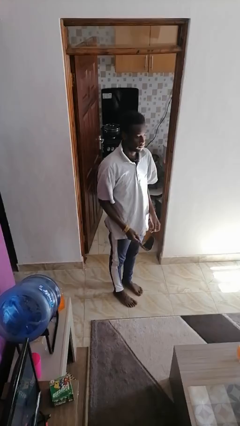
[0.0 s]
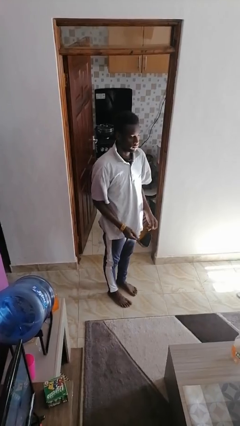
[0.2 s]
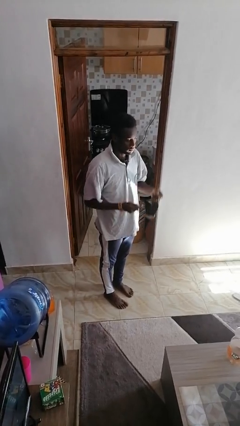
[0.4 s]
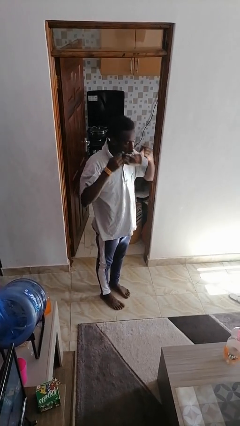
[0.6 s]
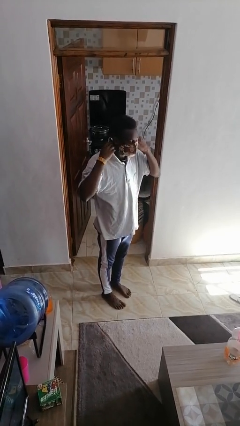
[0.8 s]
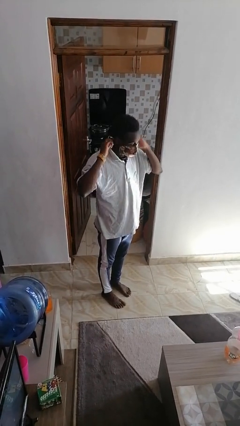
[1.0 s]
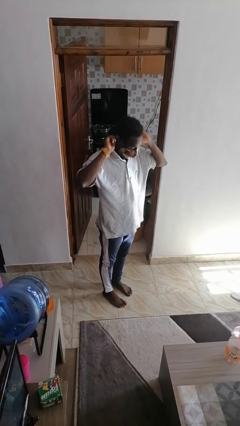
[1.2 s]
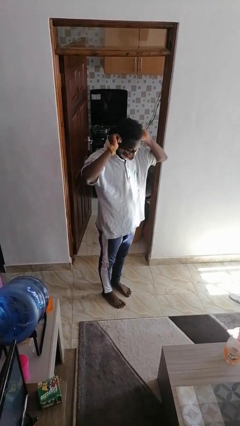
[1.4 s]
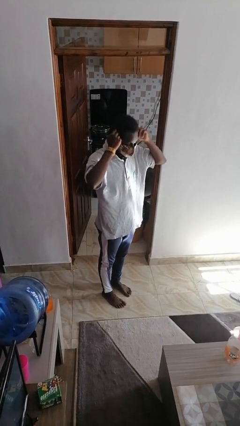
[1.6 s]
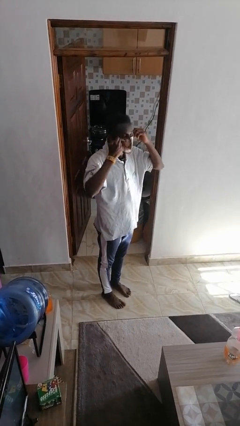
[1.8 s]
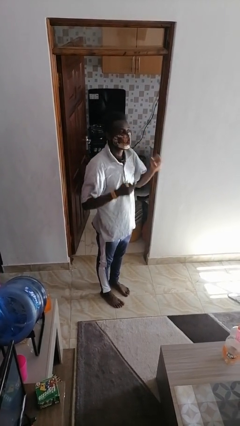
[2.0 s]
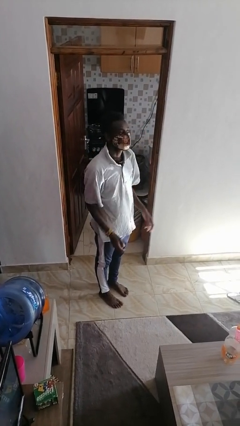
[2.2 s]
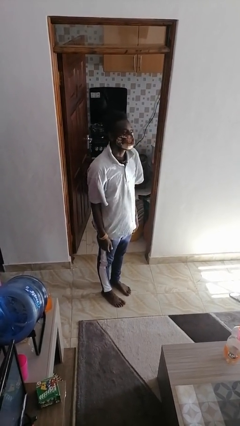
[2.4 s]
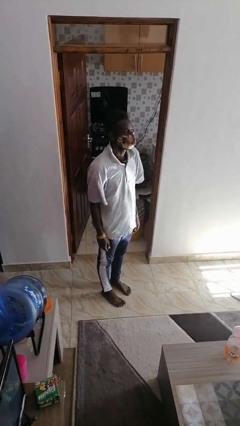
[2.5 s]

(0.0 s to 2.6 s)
person puts on facemask

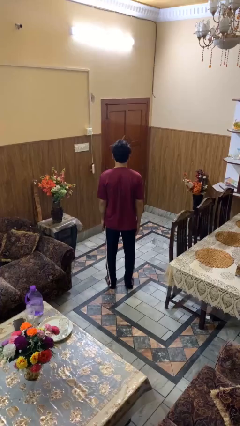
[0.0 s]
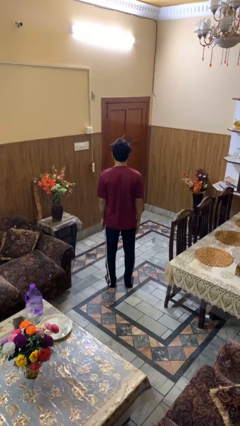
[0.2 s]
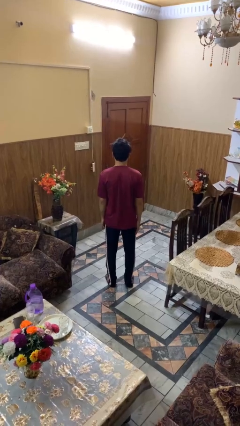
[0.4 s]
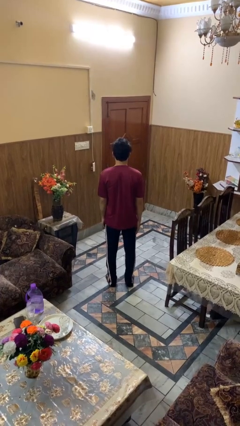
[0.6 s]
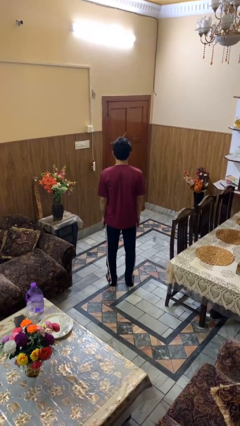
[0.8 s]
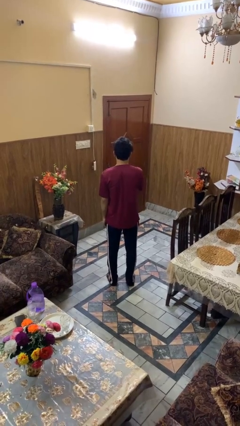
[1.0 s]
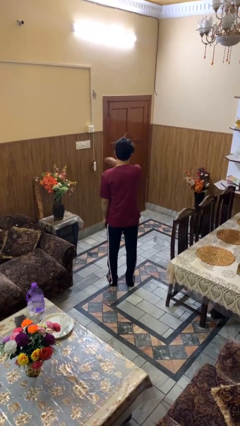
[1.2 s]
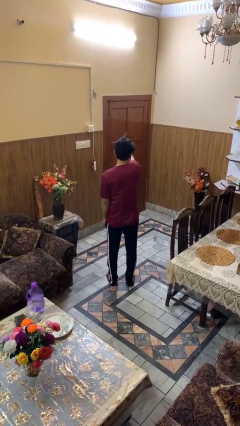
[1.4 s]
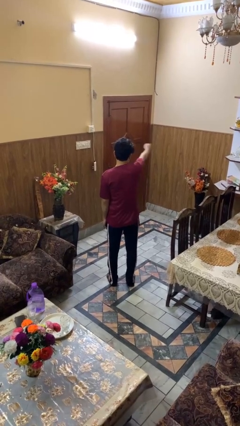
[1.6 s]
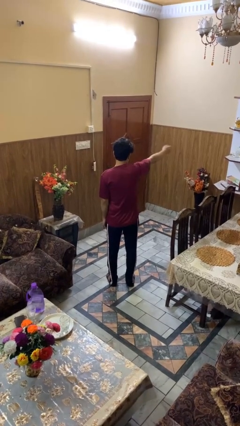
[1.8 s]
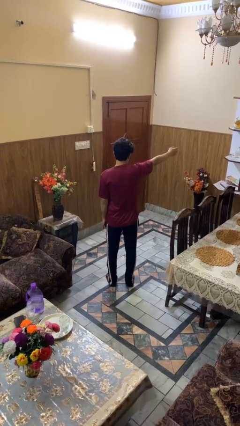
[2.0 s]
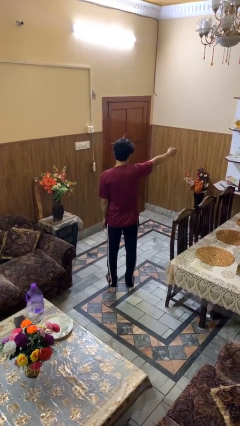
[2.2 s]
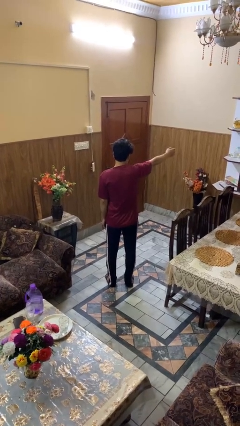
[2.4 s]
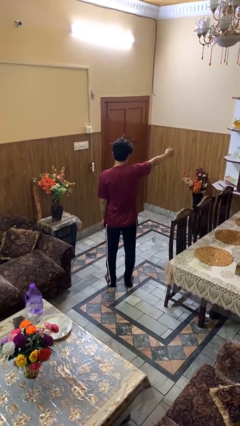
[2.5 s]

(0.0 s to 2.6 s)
person gestures swipe right

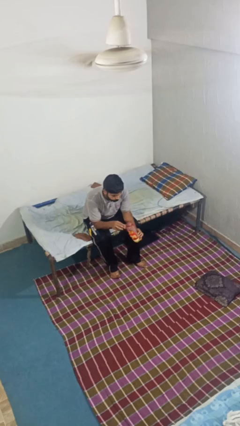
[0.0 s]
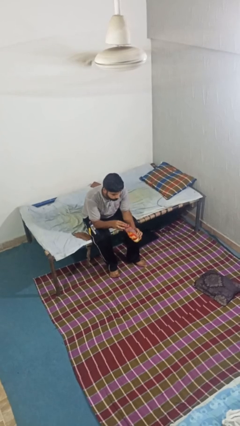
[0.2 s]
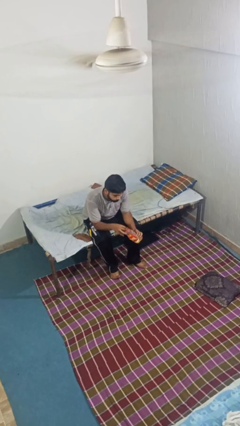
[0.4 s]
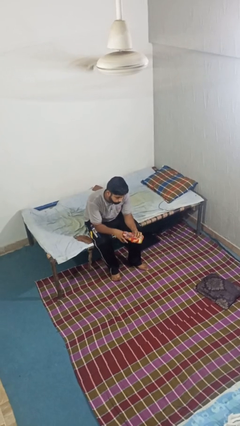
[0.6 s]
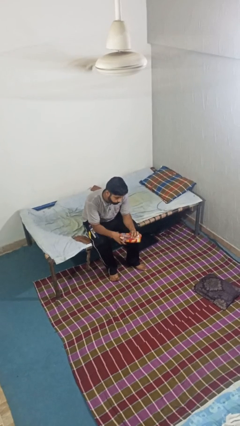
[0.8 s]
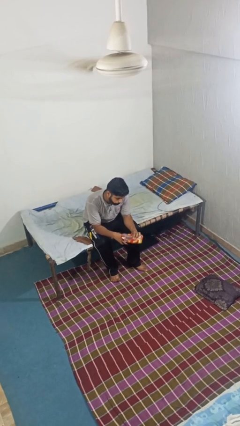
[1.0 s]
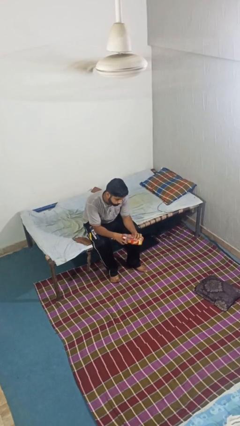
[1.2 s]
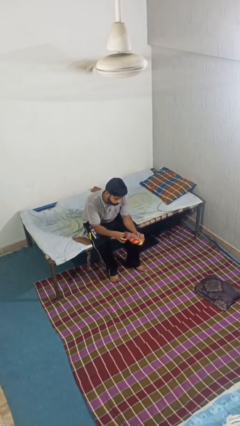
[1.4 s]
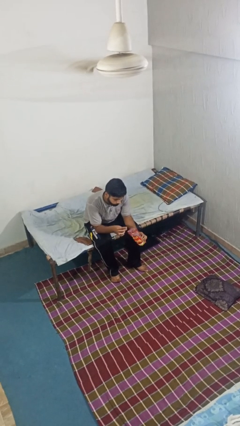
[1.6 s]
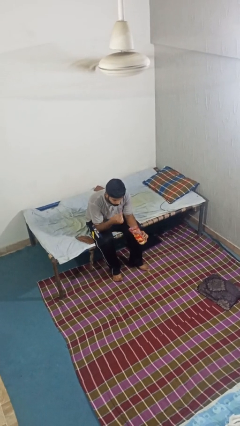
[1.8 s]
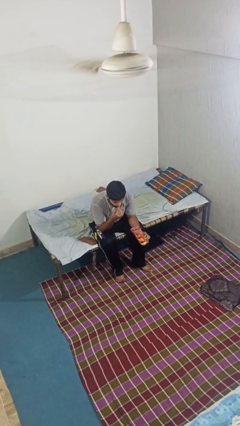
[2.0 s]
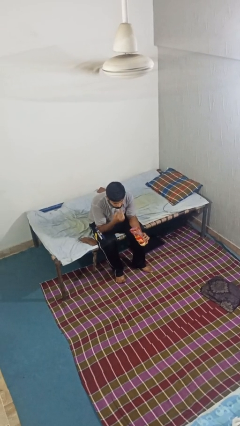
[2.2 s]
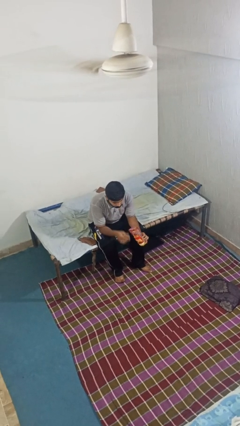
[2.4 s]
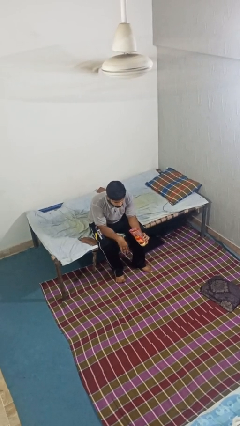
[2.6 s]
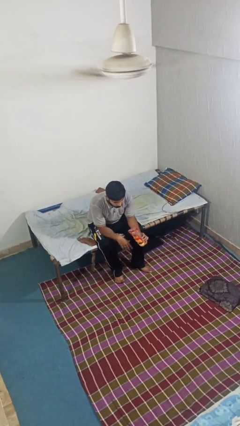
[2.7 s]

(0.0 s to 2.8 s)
person eats snack from bag

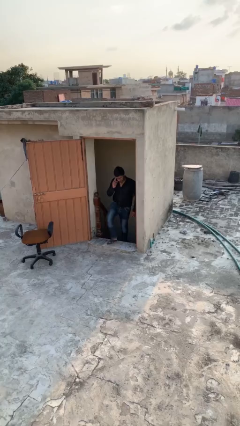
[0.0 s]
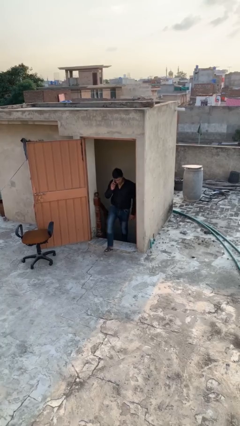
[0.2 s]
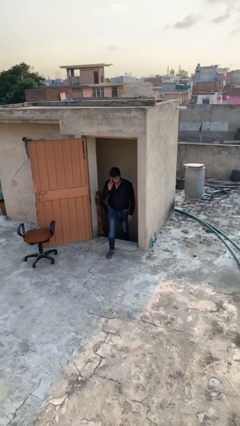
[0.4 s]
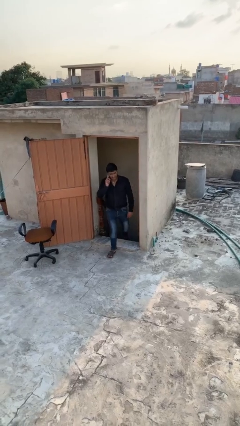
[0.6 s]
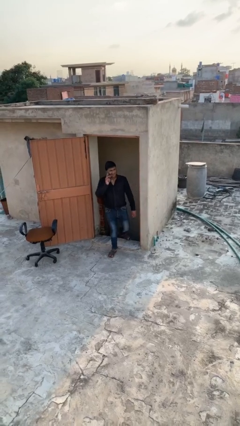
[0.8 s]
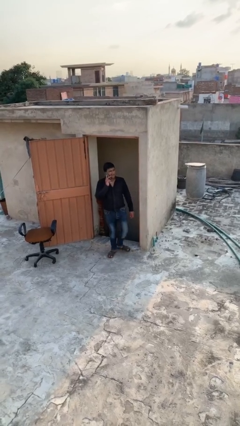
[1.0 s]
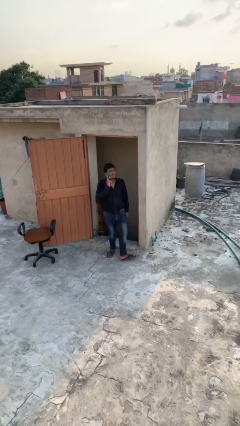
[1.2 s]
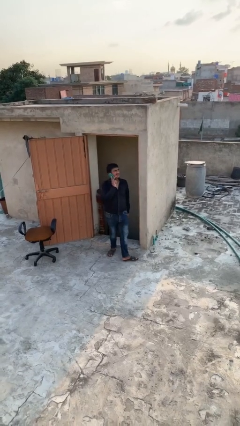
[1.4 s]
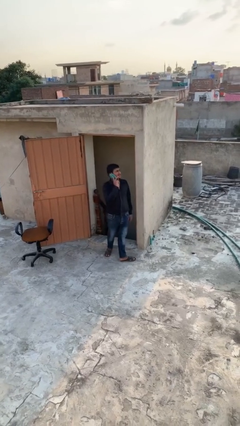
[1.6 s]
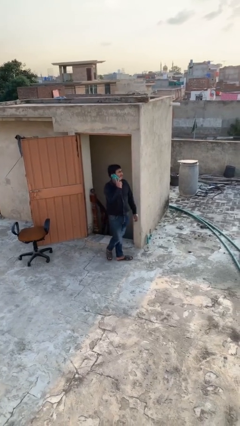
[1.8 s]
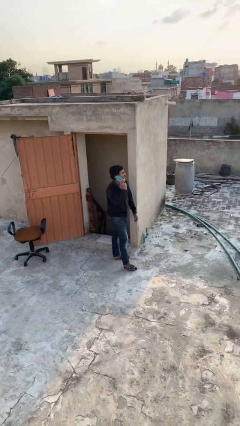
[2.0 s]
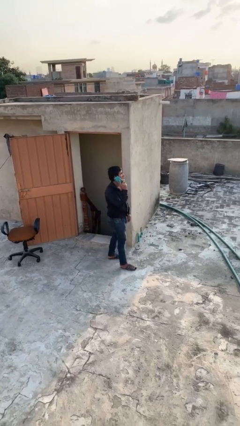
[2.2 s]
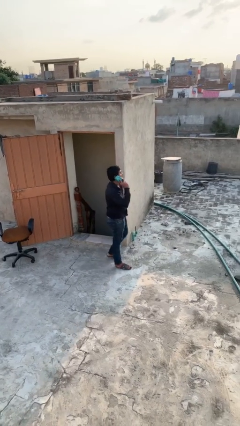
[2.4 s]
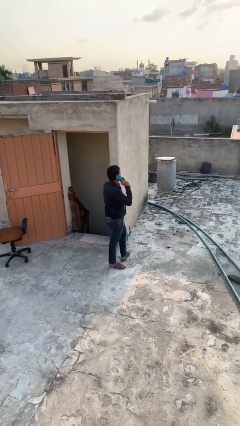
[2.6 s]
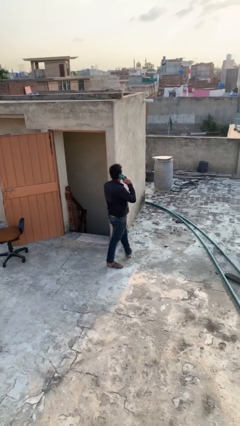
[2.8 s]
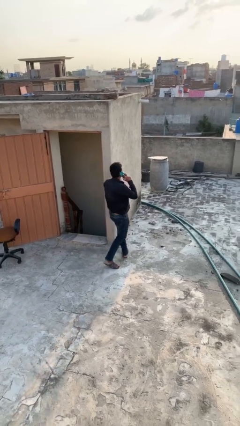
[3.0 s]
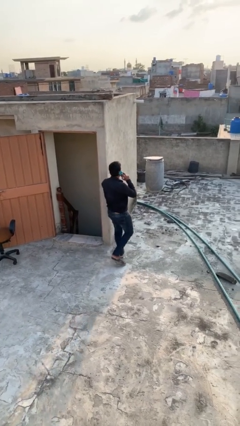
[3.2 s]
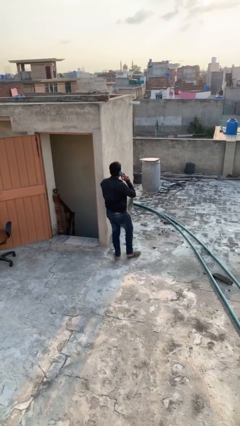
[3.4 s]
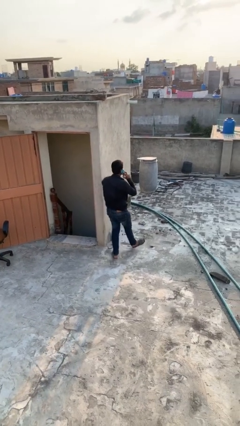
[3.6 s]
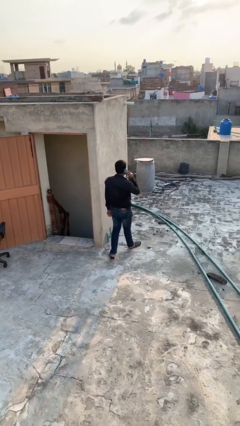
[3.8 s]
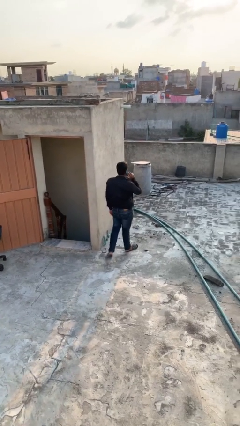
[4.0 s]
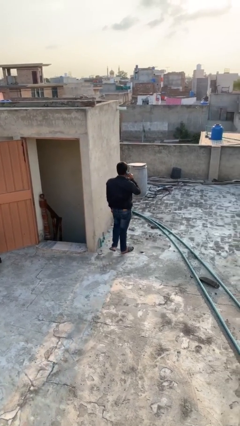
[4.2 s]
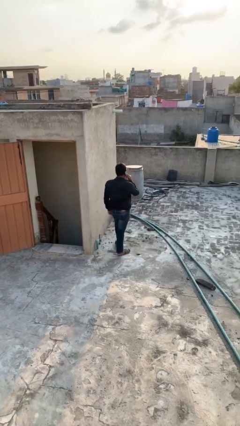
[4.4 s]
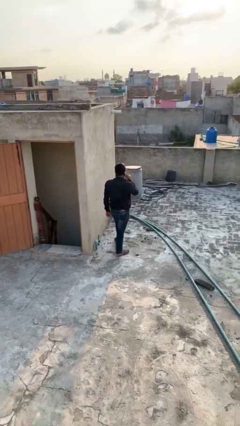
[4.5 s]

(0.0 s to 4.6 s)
person enters scene through structure

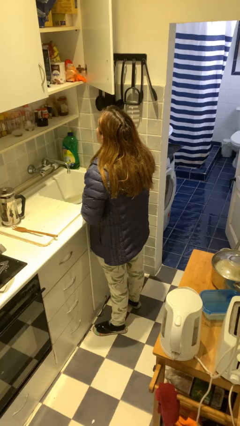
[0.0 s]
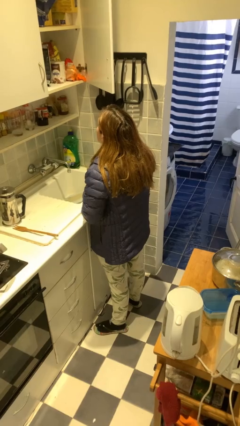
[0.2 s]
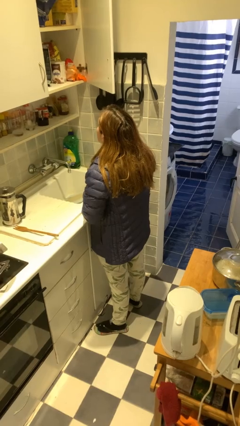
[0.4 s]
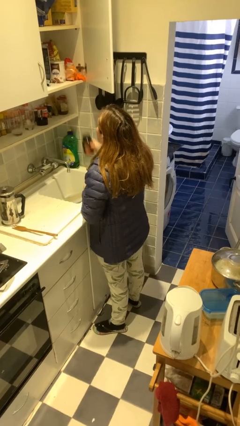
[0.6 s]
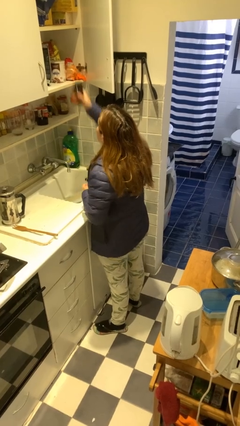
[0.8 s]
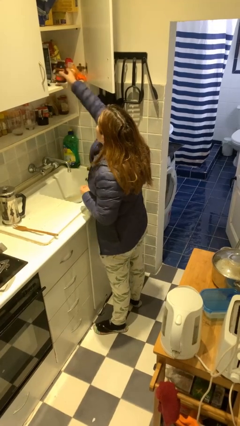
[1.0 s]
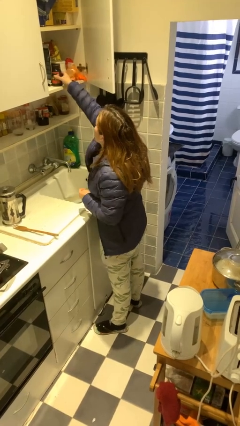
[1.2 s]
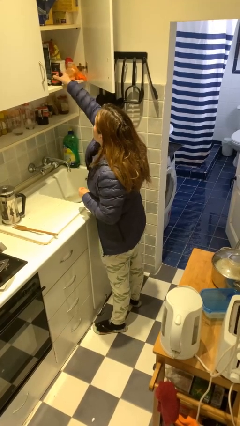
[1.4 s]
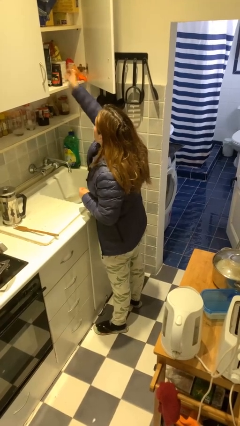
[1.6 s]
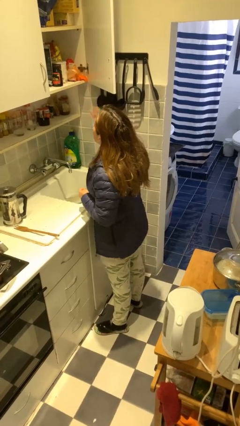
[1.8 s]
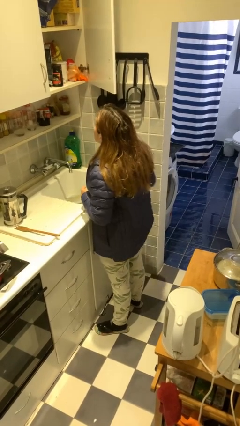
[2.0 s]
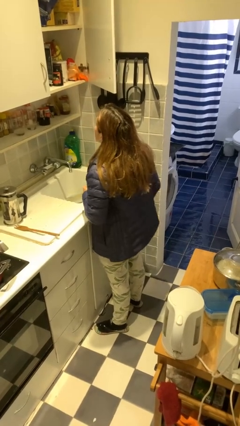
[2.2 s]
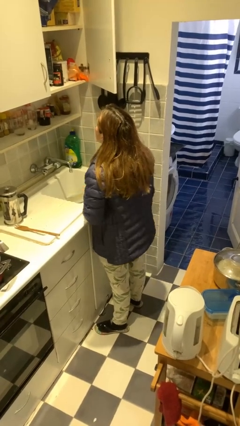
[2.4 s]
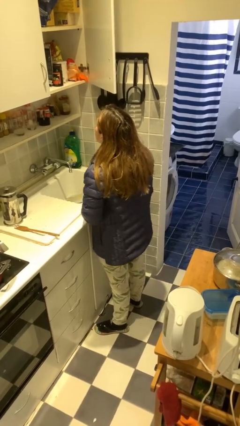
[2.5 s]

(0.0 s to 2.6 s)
person puts object in cabinet

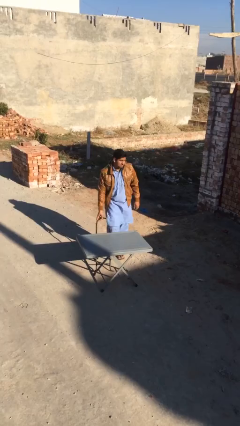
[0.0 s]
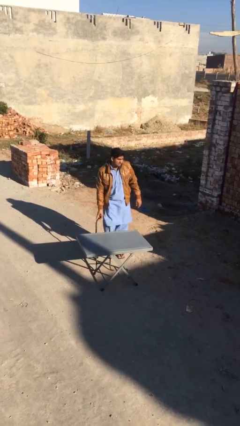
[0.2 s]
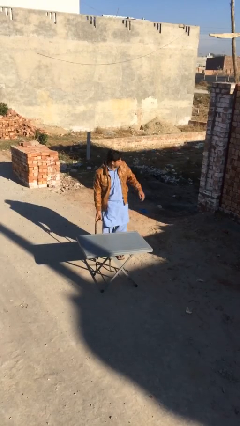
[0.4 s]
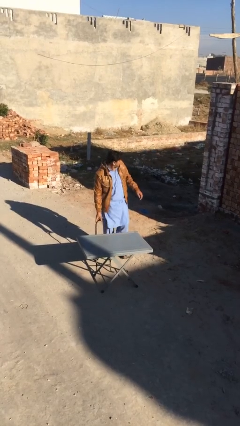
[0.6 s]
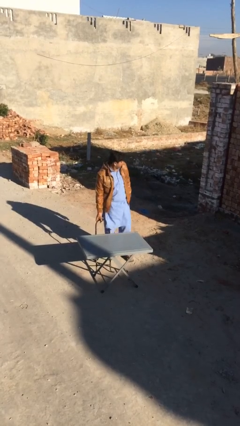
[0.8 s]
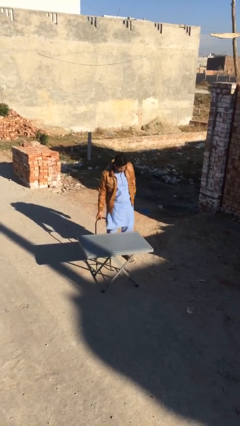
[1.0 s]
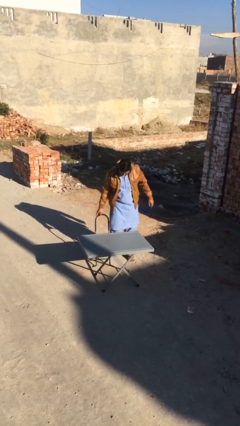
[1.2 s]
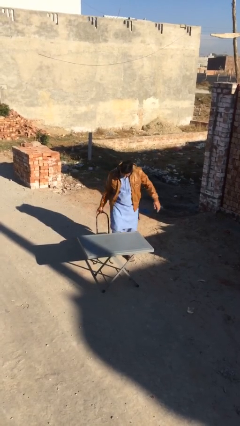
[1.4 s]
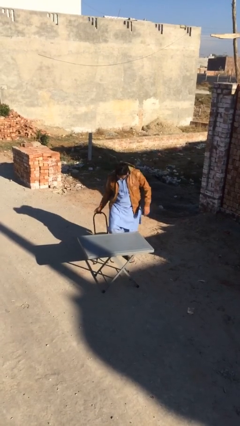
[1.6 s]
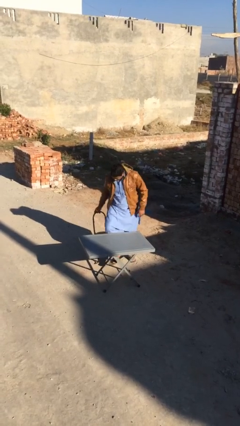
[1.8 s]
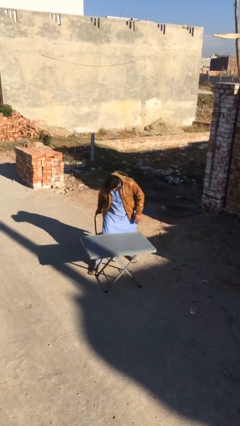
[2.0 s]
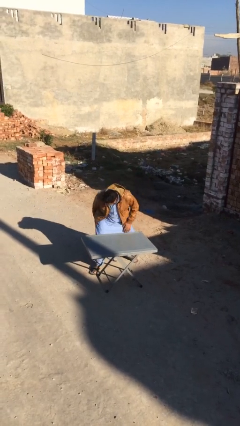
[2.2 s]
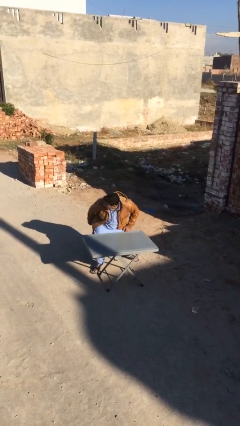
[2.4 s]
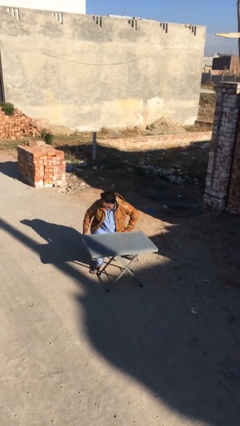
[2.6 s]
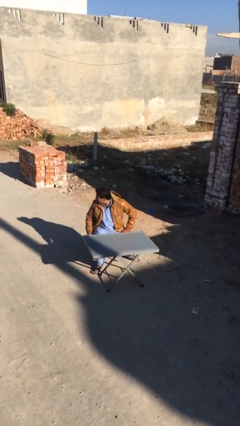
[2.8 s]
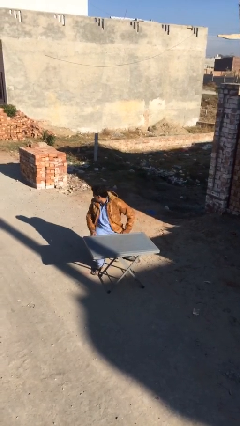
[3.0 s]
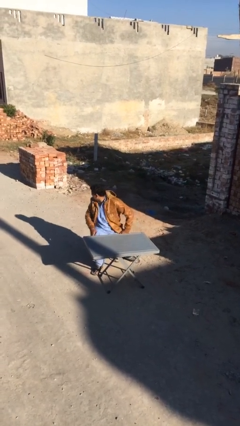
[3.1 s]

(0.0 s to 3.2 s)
person sits down
